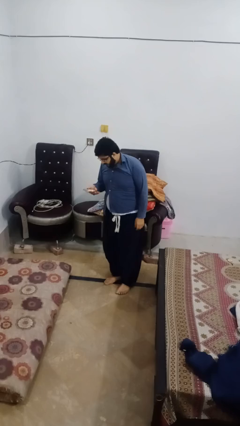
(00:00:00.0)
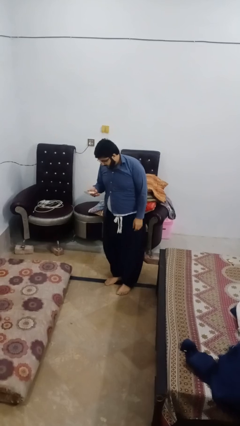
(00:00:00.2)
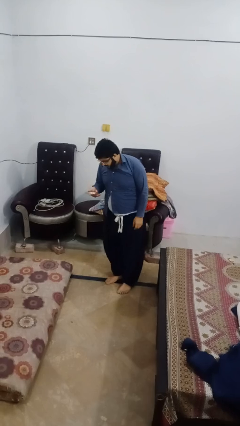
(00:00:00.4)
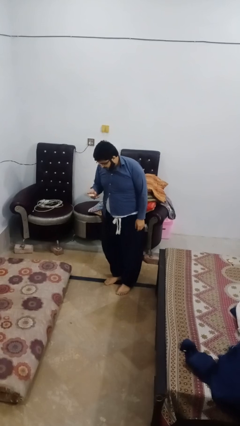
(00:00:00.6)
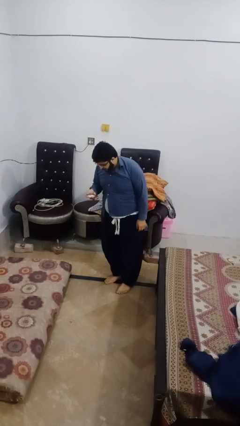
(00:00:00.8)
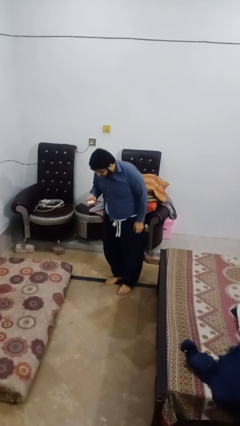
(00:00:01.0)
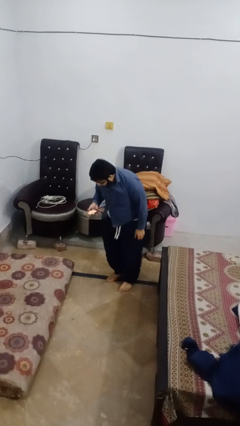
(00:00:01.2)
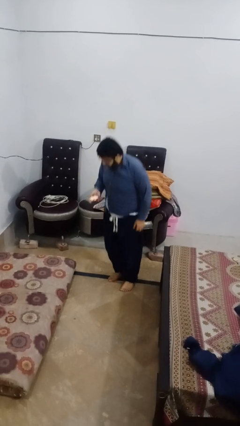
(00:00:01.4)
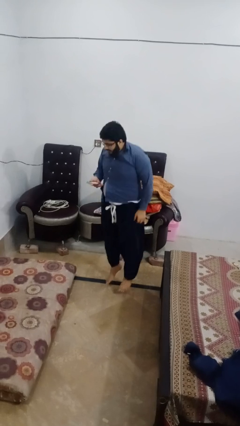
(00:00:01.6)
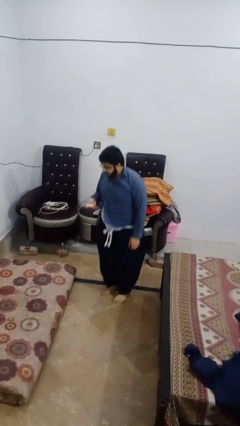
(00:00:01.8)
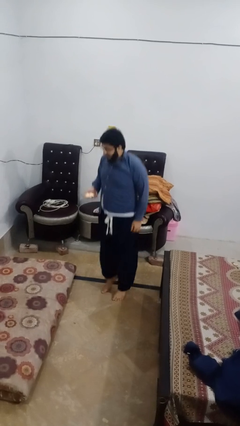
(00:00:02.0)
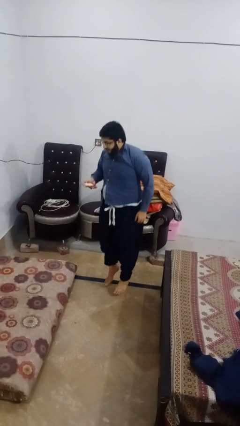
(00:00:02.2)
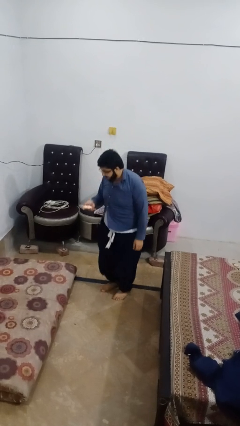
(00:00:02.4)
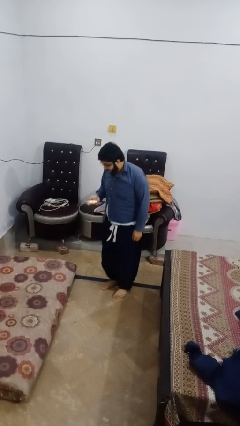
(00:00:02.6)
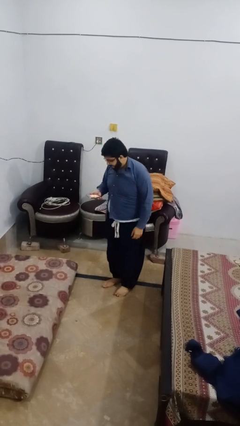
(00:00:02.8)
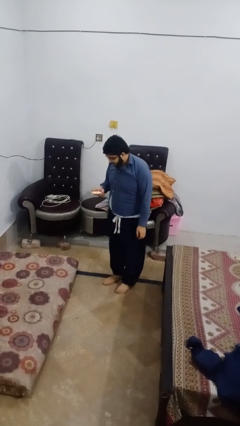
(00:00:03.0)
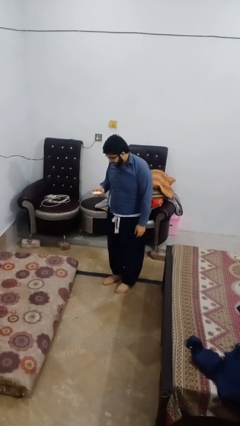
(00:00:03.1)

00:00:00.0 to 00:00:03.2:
person jumps

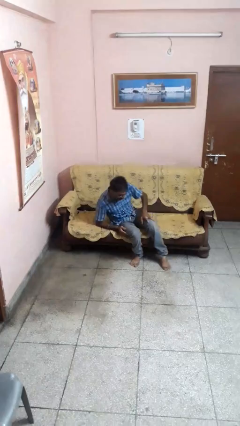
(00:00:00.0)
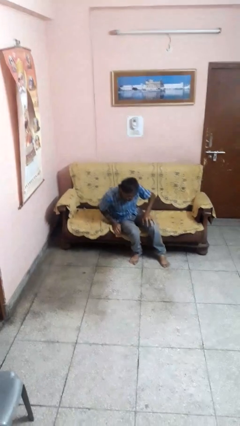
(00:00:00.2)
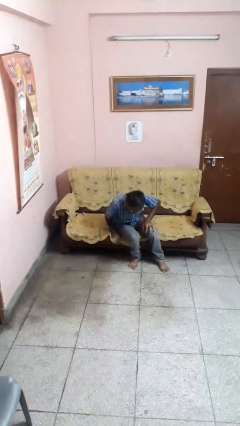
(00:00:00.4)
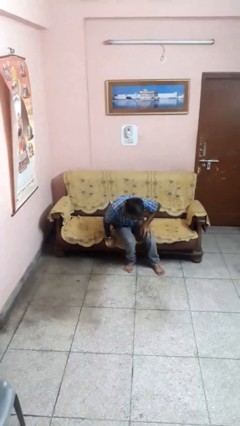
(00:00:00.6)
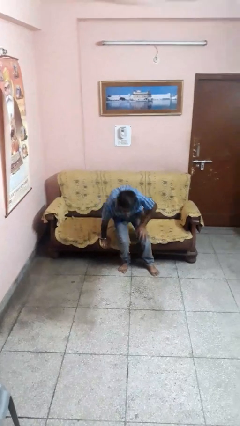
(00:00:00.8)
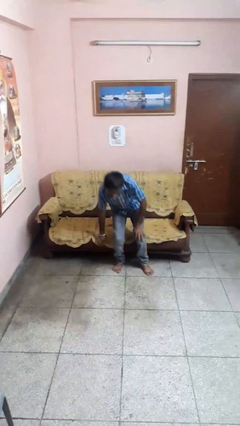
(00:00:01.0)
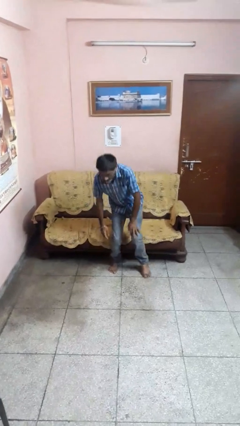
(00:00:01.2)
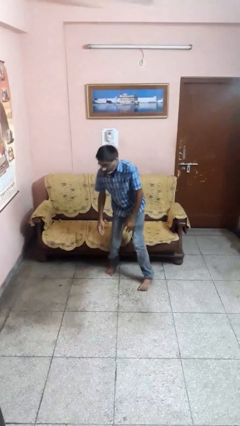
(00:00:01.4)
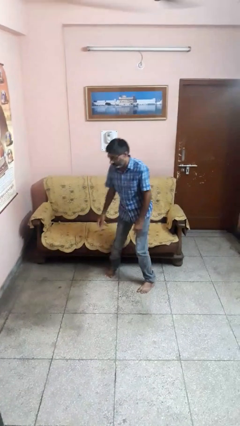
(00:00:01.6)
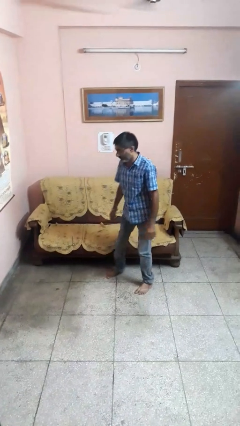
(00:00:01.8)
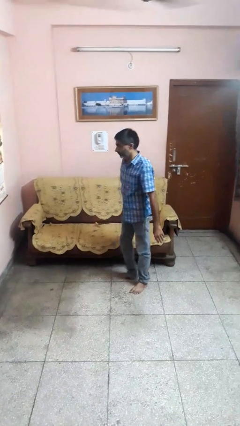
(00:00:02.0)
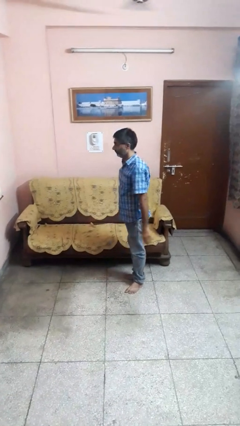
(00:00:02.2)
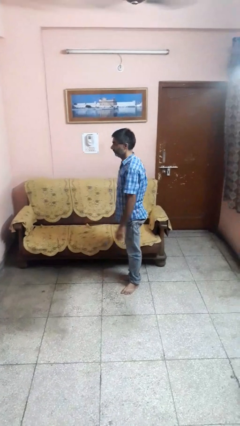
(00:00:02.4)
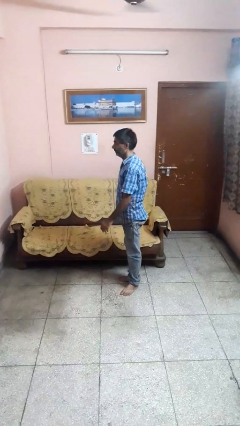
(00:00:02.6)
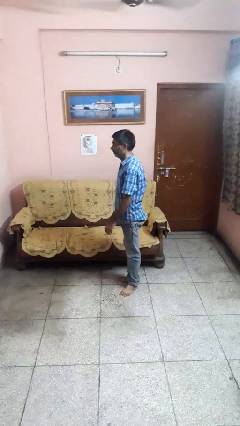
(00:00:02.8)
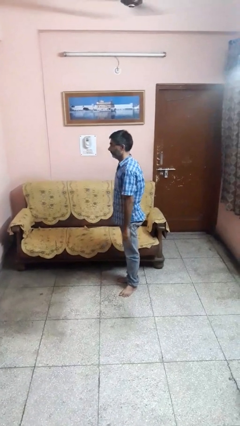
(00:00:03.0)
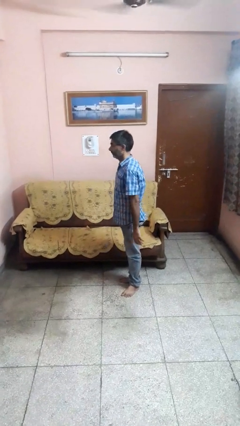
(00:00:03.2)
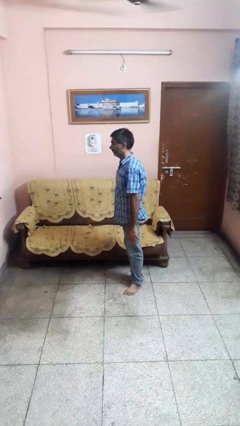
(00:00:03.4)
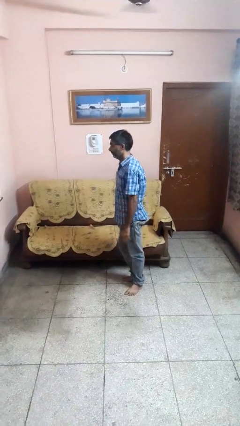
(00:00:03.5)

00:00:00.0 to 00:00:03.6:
person stands up

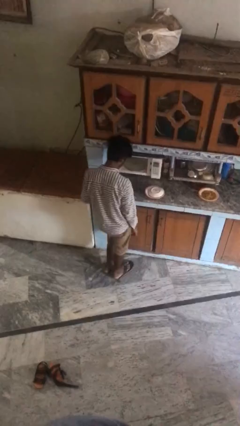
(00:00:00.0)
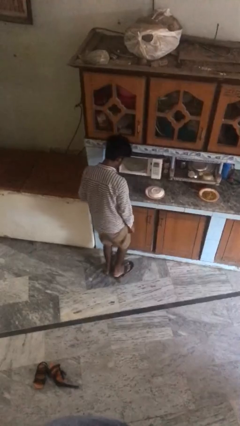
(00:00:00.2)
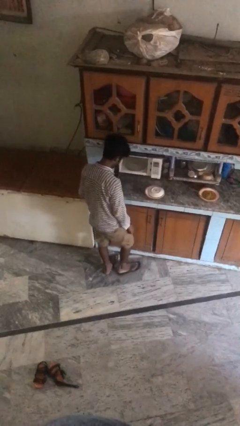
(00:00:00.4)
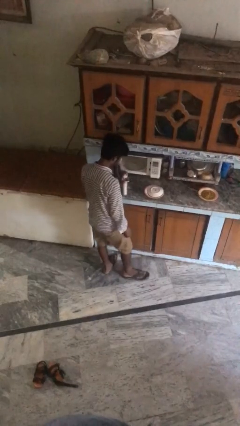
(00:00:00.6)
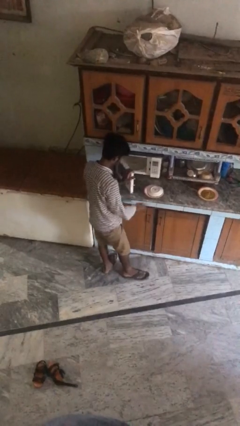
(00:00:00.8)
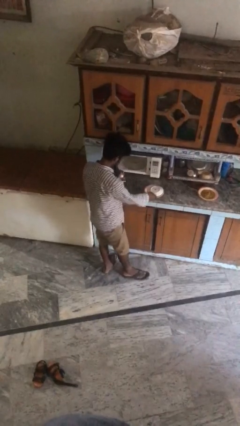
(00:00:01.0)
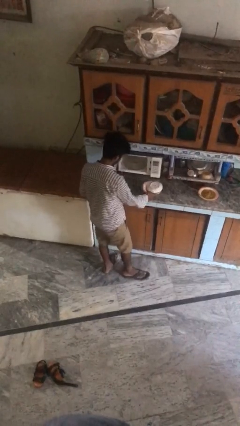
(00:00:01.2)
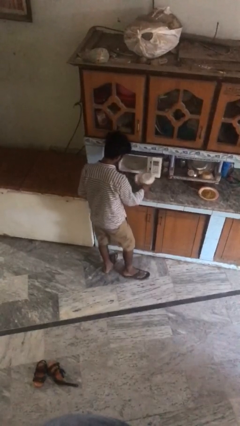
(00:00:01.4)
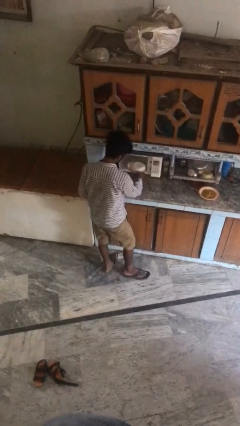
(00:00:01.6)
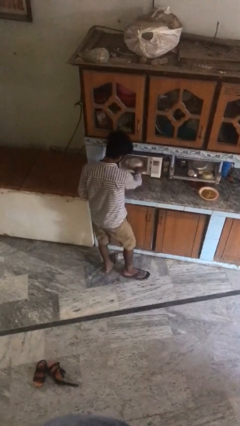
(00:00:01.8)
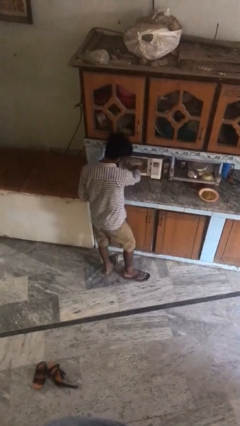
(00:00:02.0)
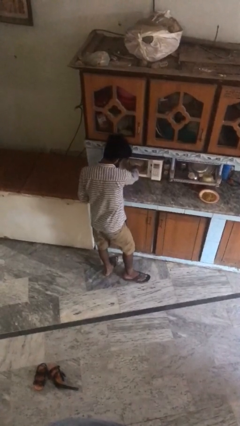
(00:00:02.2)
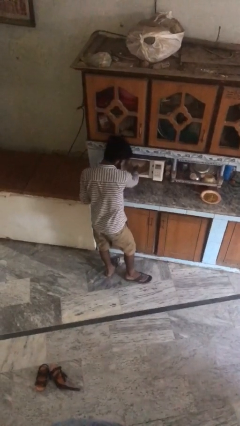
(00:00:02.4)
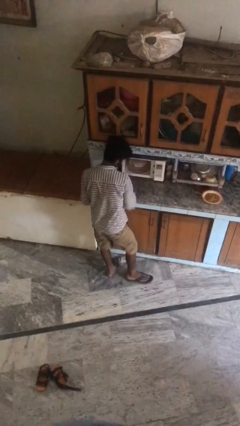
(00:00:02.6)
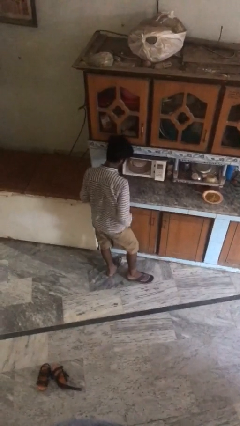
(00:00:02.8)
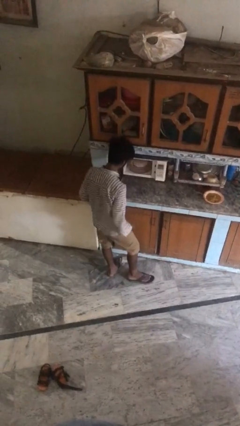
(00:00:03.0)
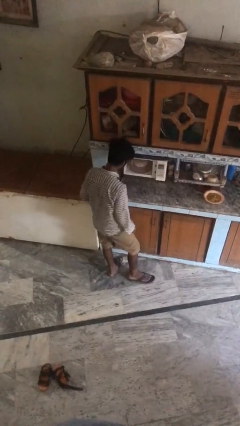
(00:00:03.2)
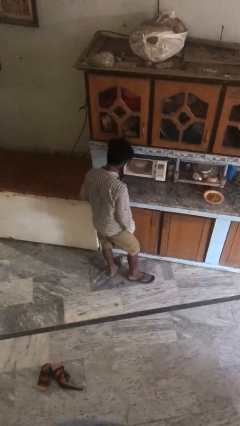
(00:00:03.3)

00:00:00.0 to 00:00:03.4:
person puts object into oven

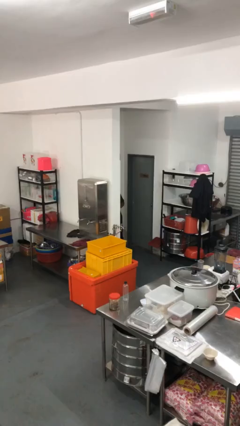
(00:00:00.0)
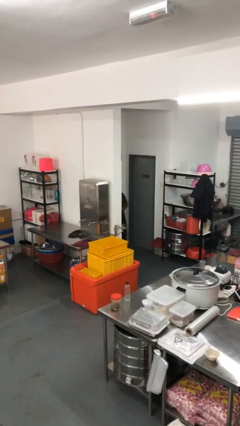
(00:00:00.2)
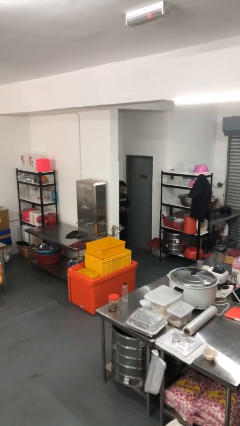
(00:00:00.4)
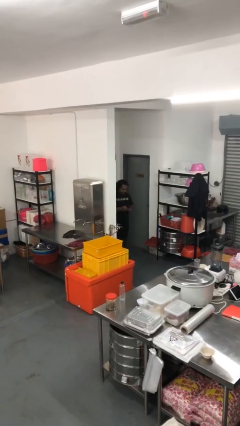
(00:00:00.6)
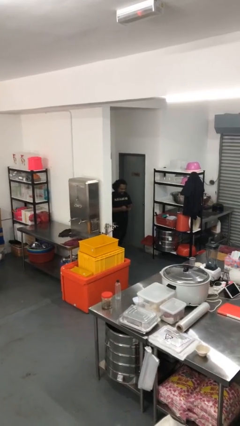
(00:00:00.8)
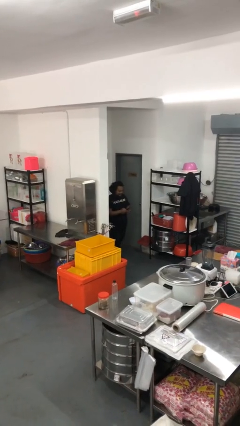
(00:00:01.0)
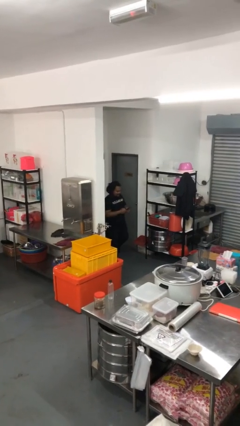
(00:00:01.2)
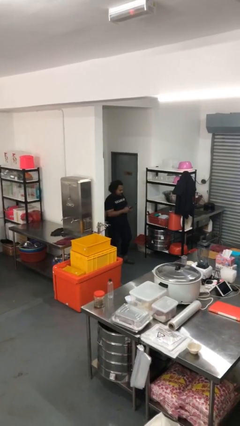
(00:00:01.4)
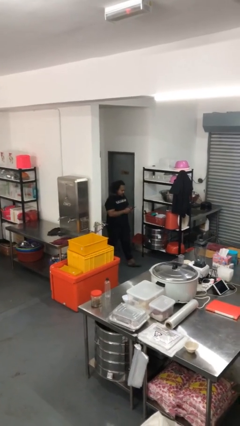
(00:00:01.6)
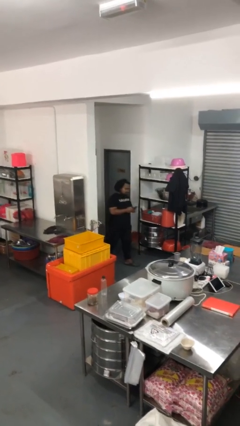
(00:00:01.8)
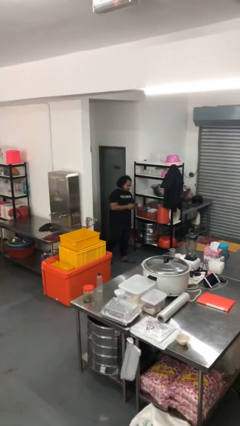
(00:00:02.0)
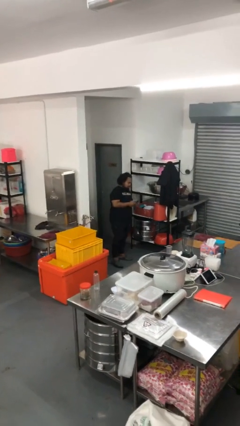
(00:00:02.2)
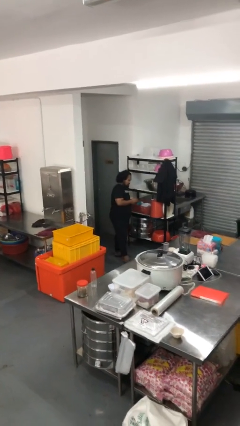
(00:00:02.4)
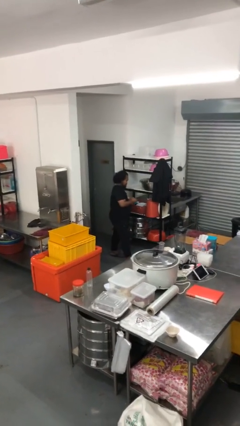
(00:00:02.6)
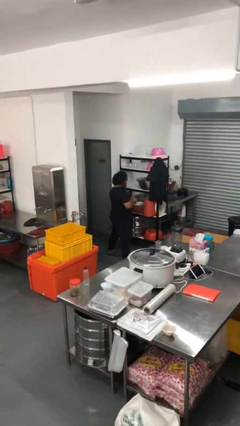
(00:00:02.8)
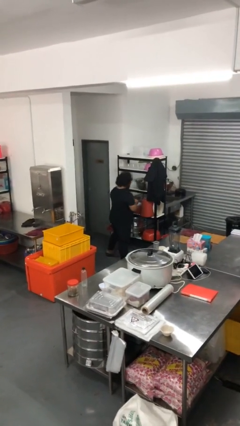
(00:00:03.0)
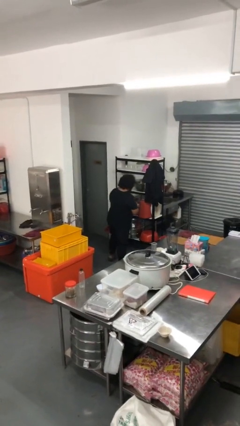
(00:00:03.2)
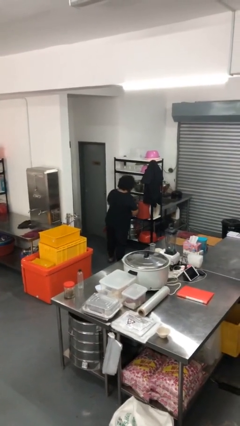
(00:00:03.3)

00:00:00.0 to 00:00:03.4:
person enters scene through structure

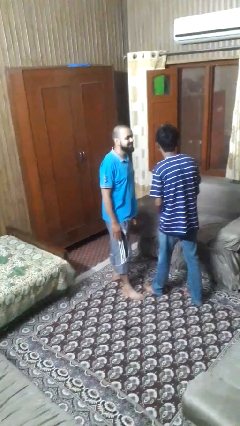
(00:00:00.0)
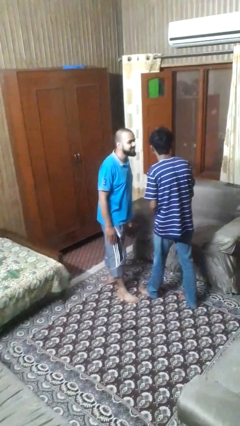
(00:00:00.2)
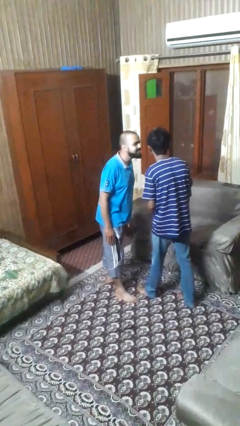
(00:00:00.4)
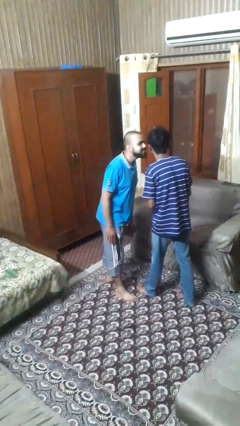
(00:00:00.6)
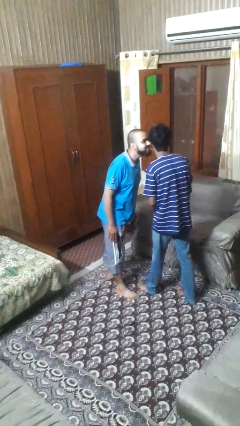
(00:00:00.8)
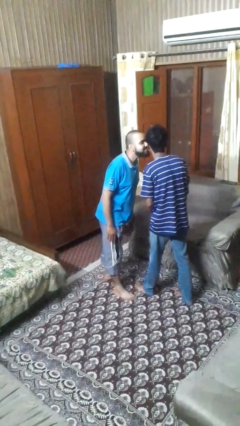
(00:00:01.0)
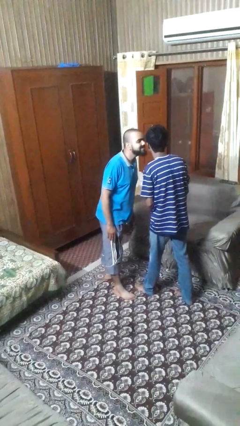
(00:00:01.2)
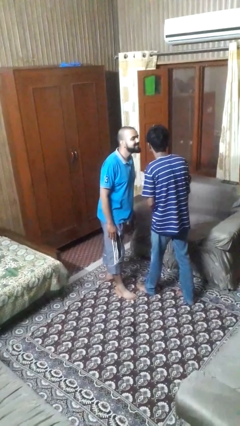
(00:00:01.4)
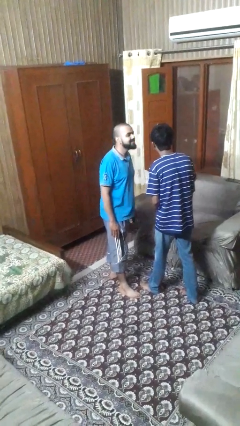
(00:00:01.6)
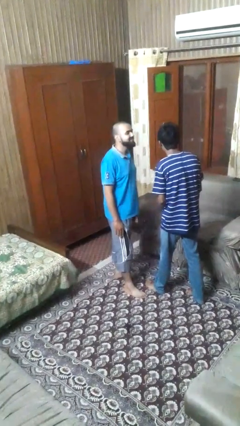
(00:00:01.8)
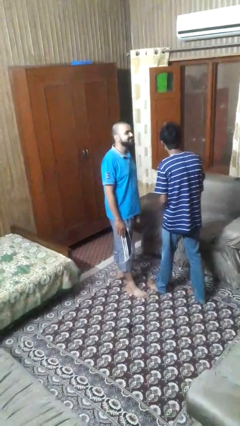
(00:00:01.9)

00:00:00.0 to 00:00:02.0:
person kisses cheek of person

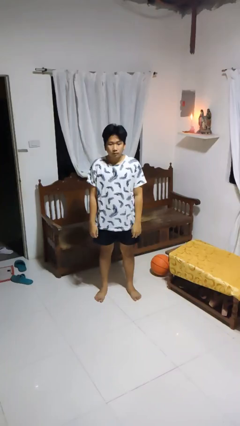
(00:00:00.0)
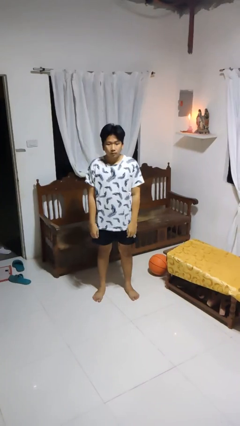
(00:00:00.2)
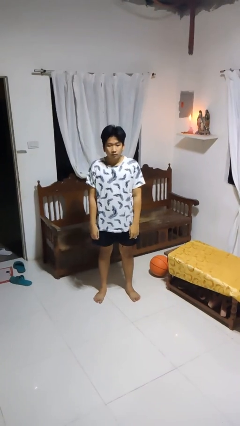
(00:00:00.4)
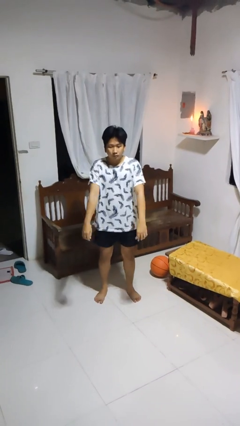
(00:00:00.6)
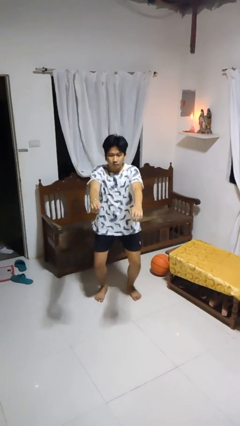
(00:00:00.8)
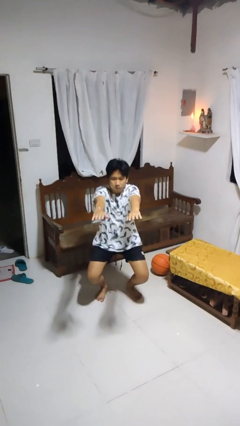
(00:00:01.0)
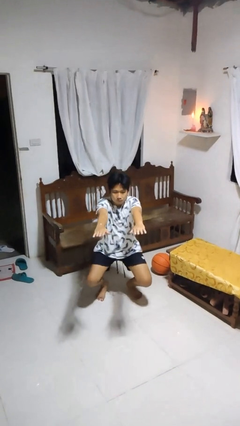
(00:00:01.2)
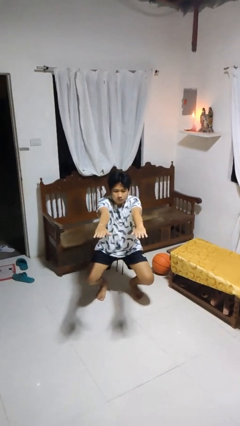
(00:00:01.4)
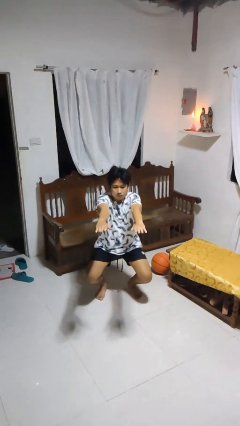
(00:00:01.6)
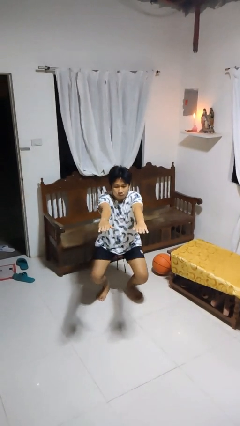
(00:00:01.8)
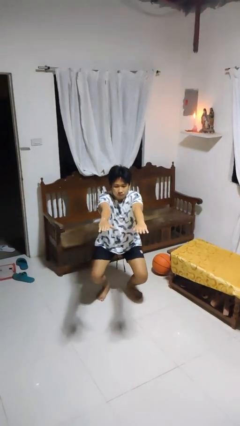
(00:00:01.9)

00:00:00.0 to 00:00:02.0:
person squats
